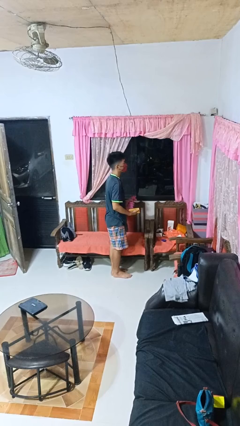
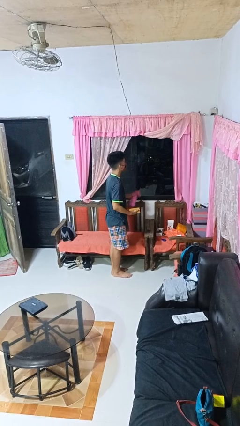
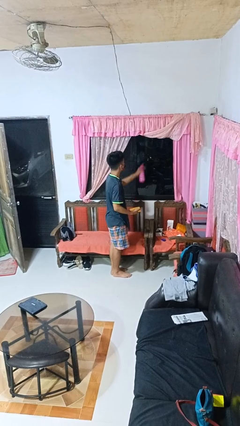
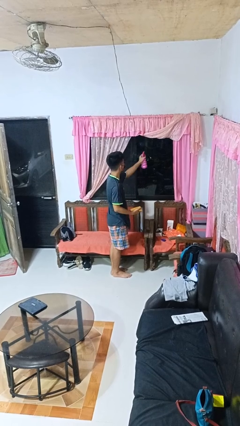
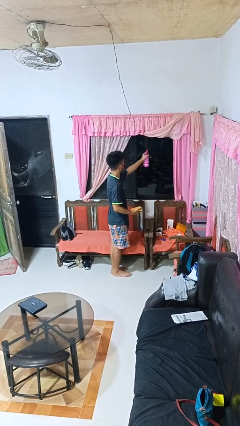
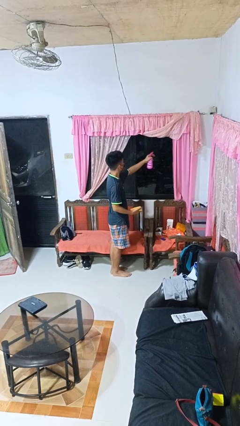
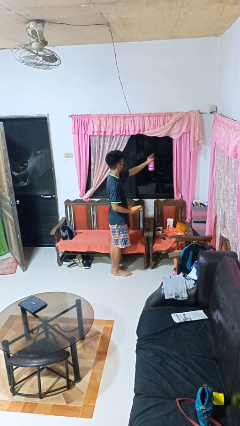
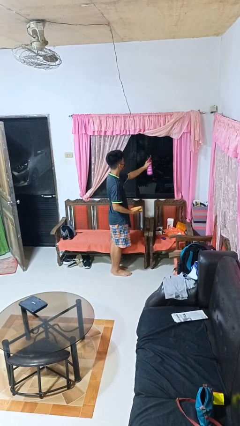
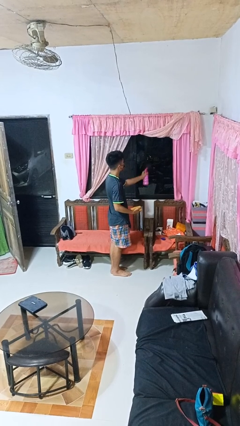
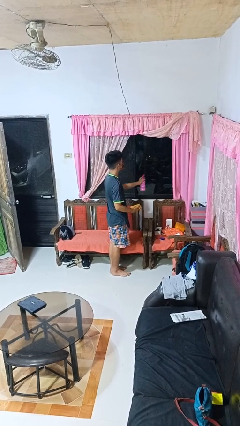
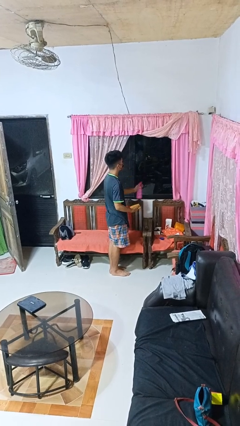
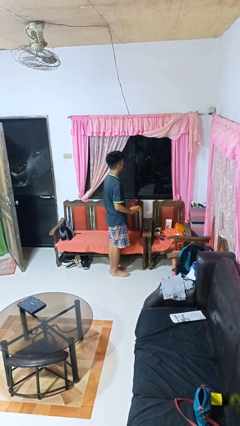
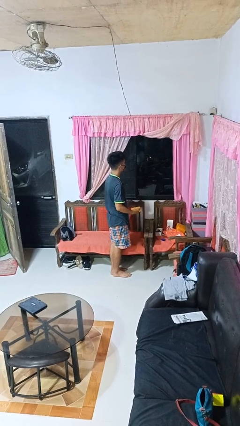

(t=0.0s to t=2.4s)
person sprays from bottle

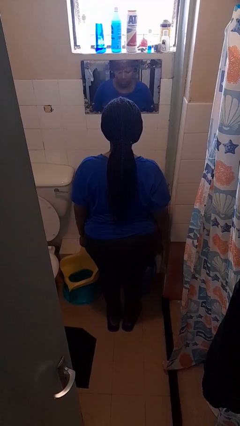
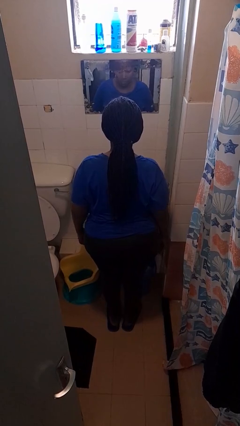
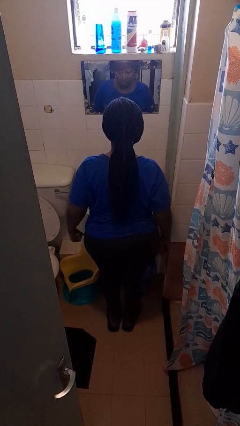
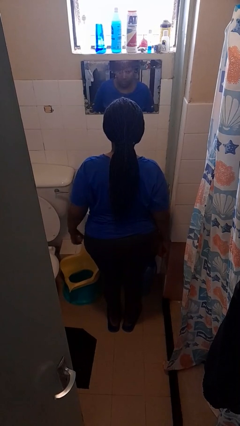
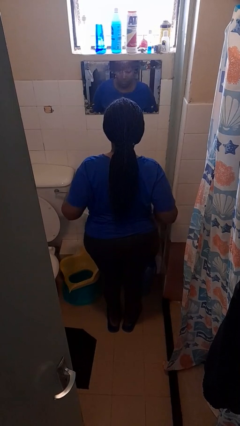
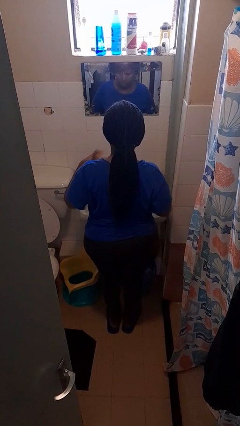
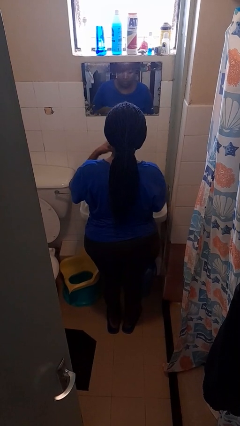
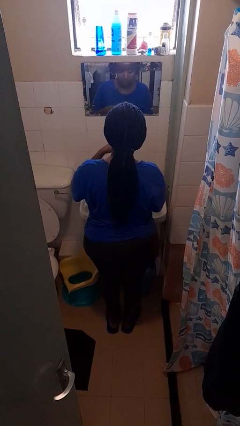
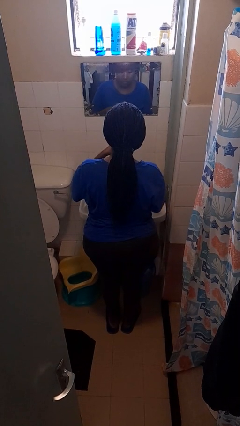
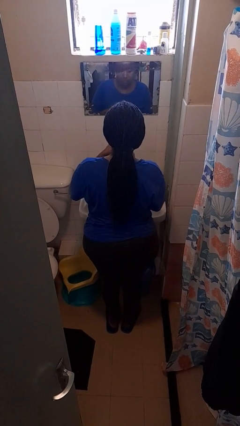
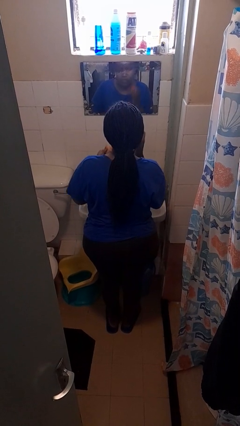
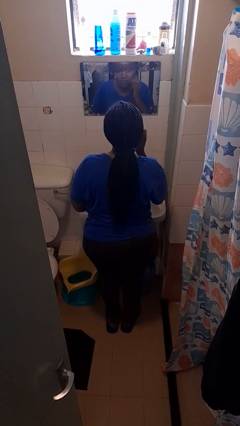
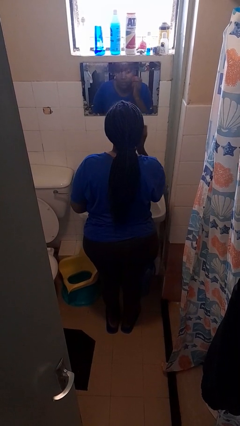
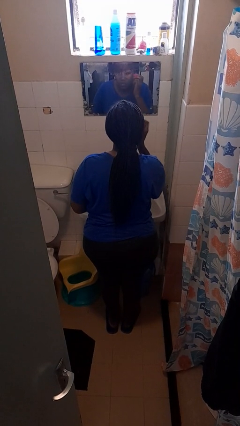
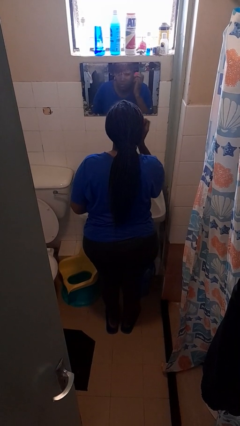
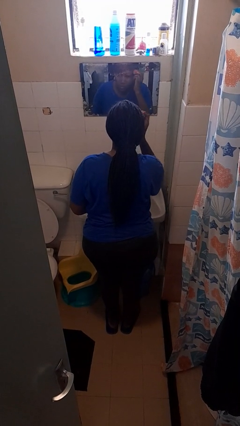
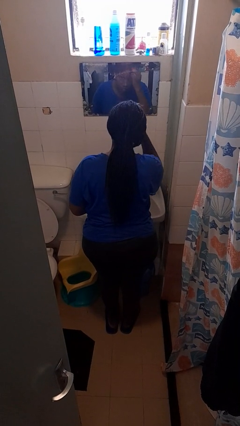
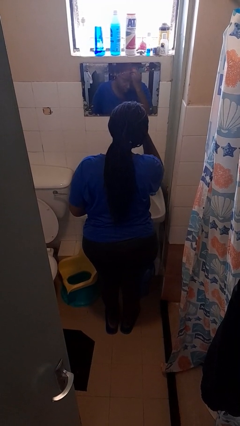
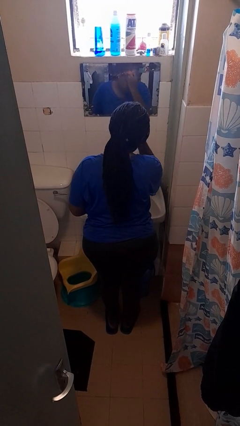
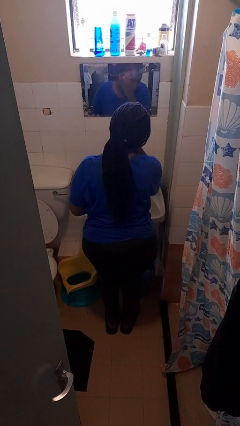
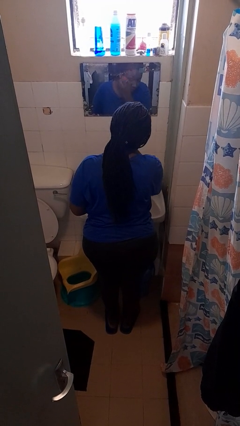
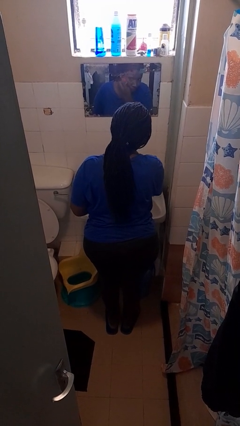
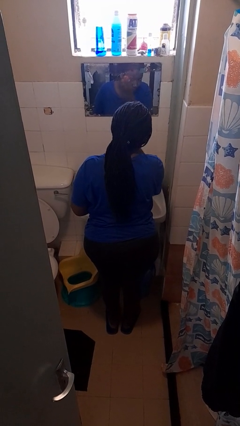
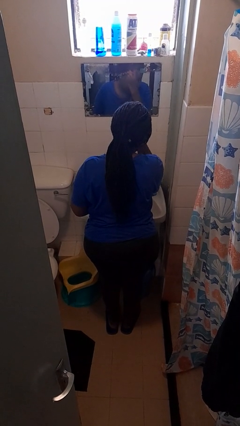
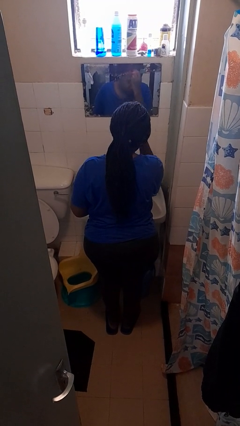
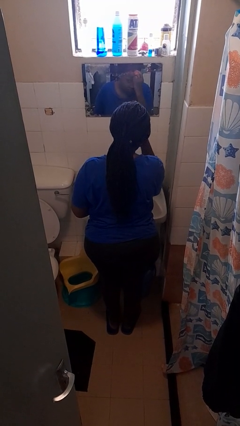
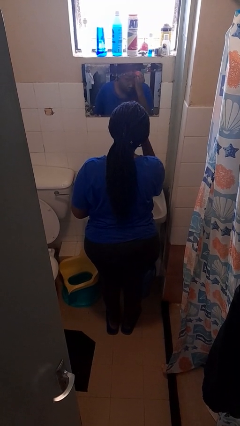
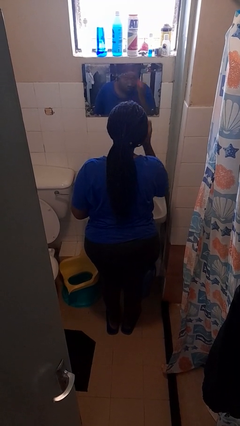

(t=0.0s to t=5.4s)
person applies foundation makeup

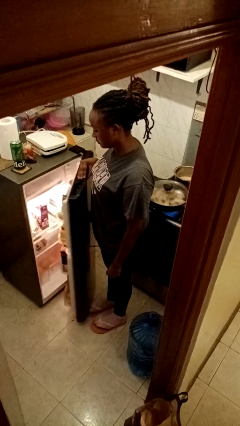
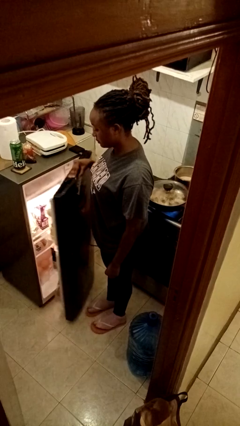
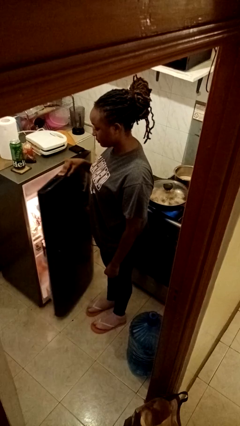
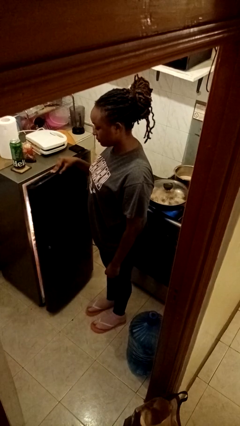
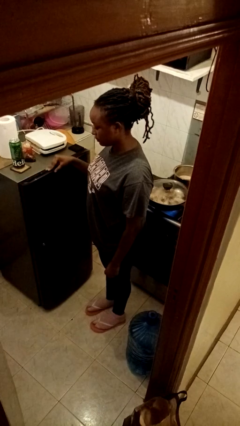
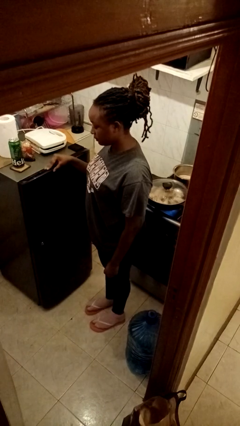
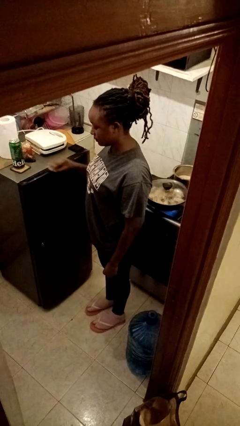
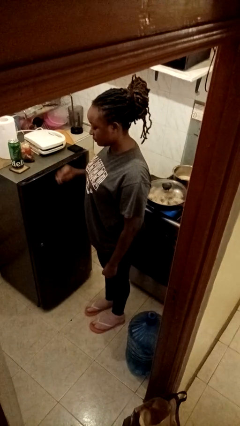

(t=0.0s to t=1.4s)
person closes refrigerator

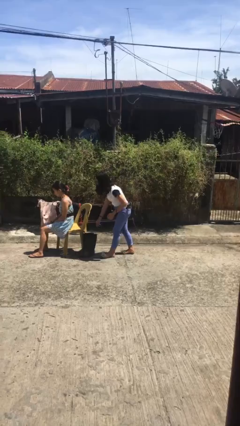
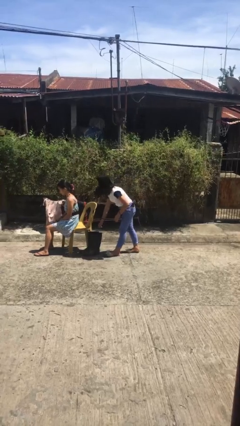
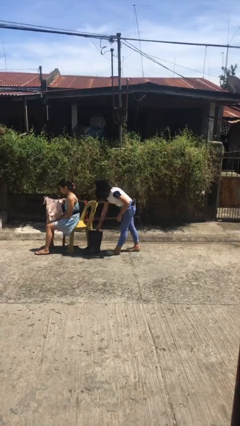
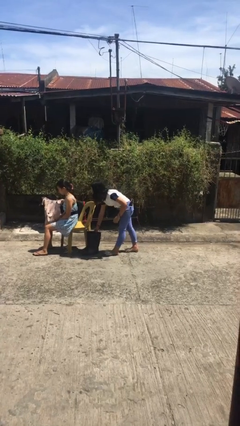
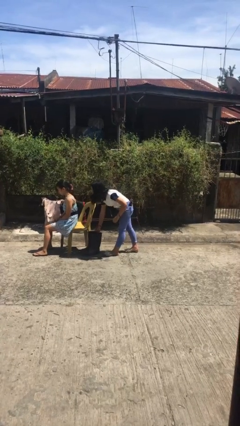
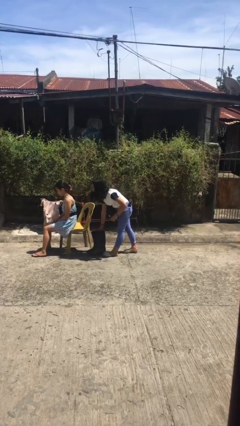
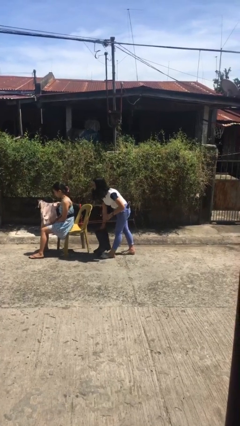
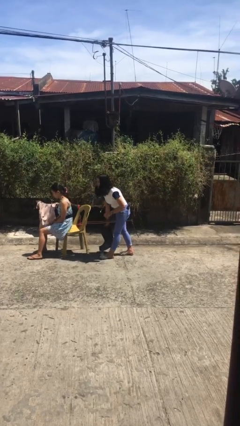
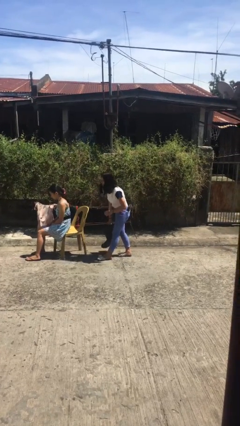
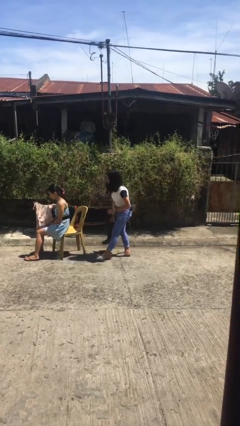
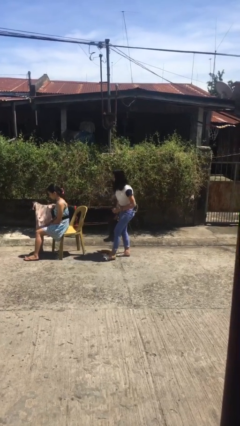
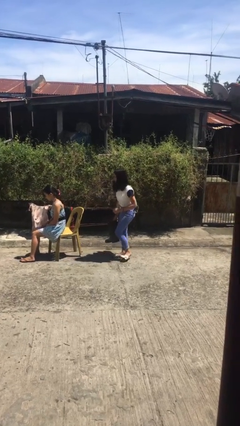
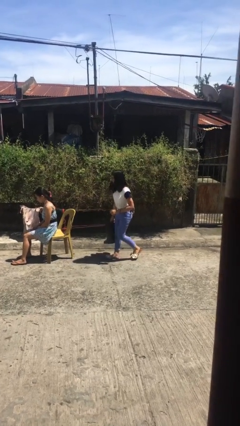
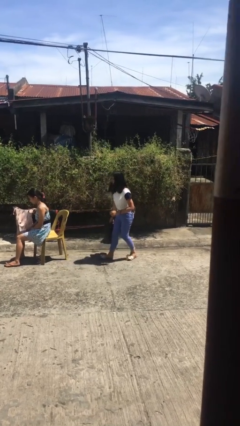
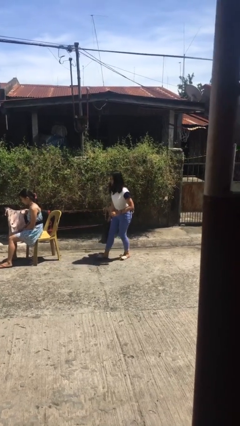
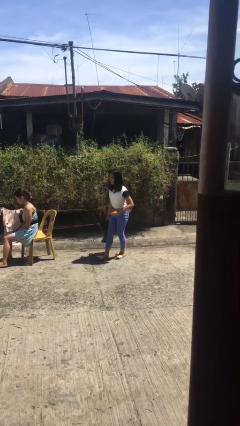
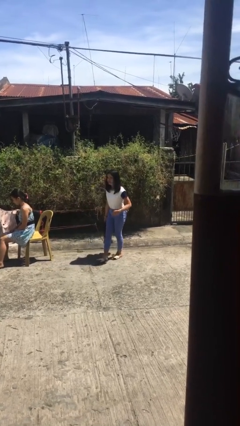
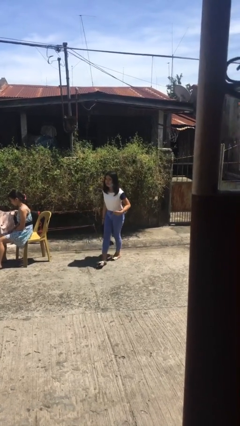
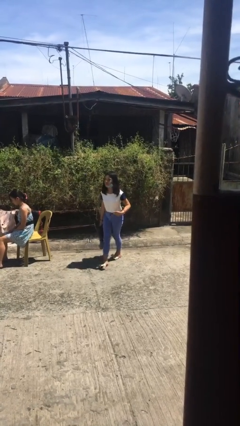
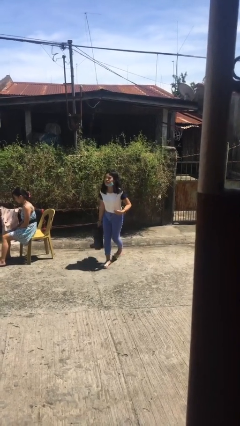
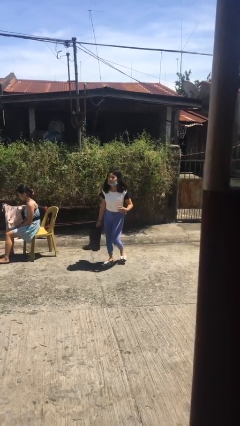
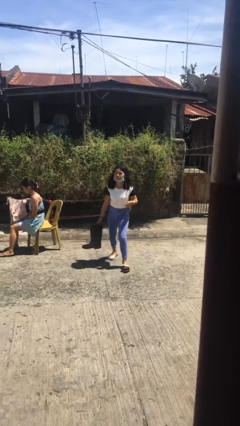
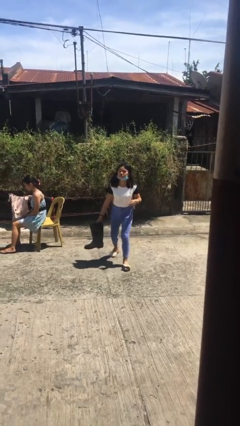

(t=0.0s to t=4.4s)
person steals object from person

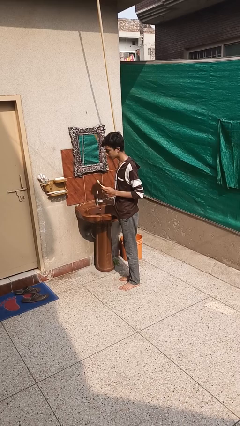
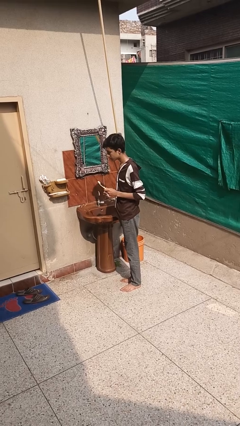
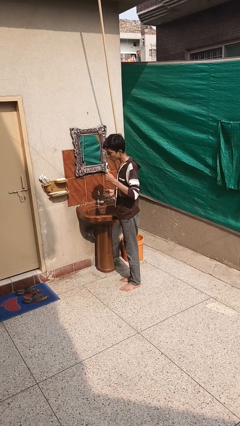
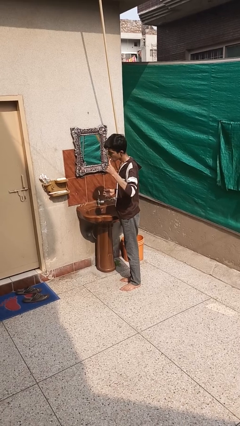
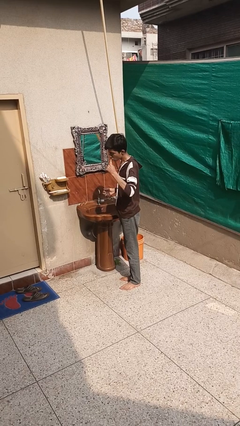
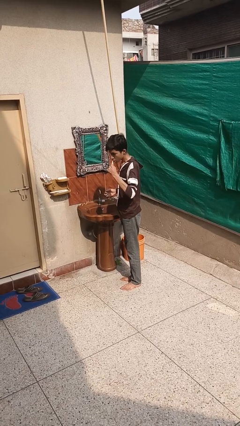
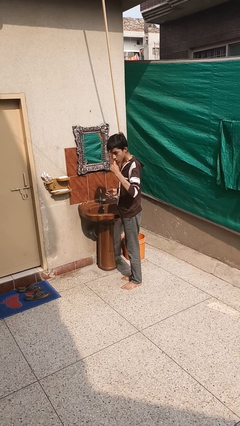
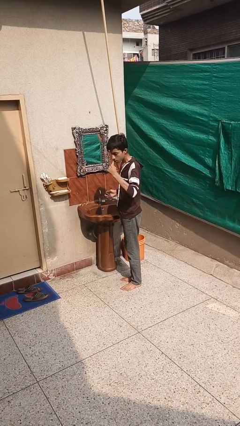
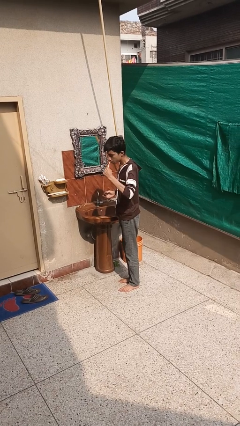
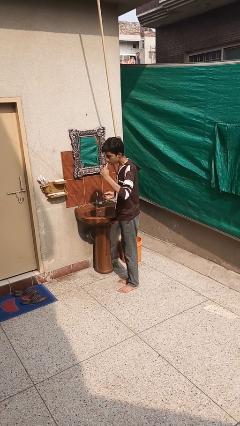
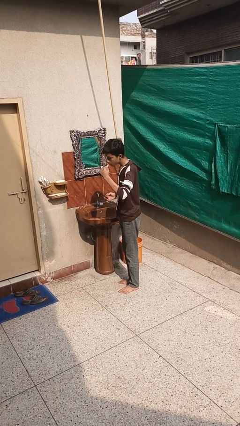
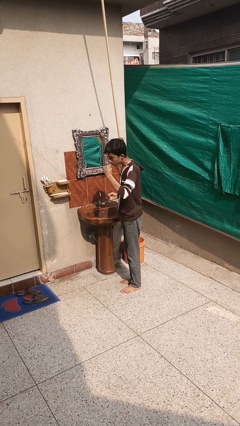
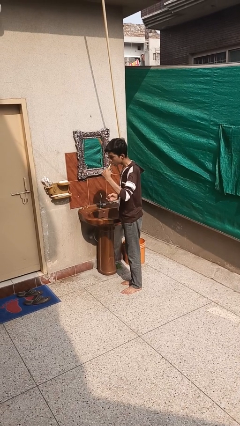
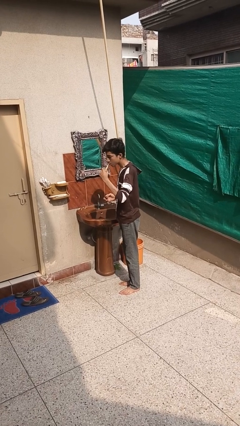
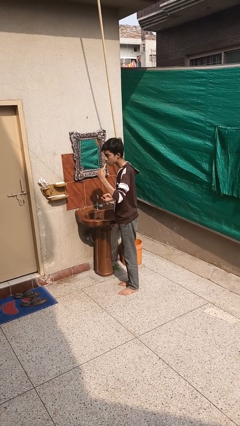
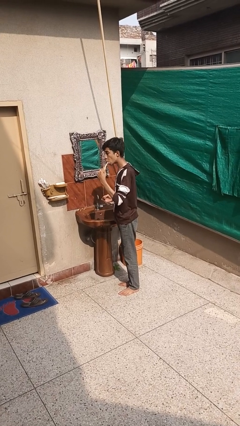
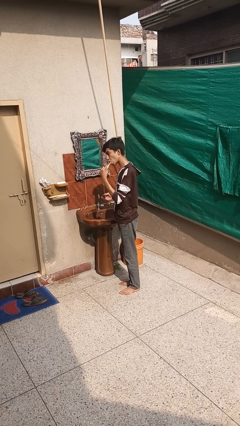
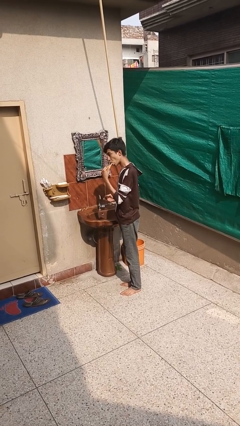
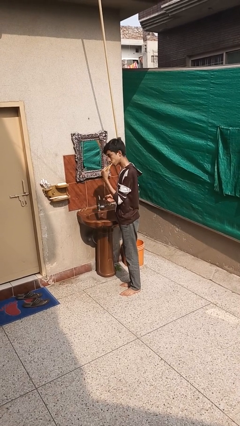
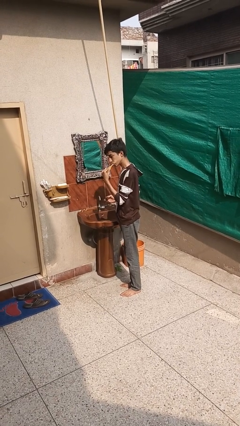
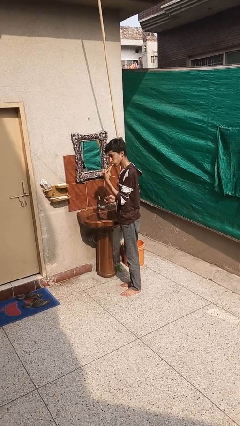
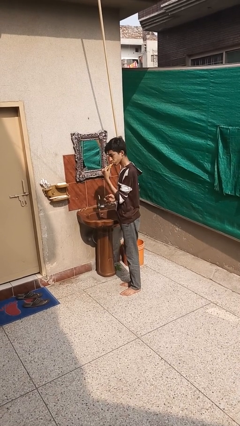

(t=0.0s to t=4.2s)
person brushes teeth
